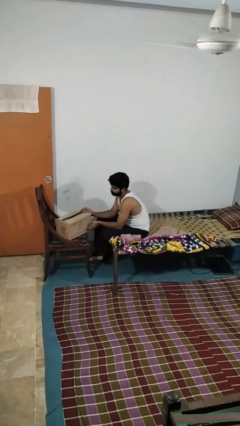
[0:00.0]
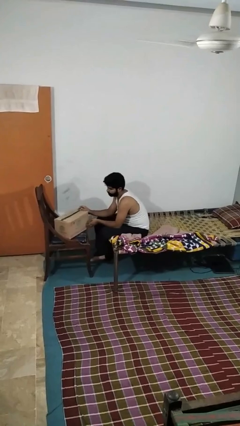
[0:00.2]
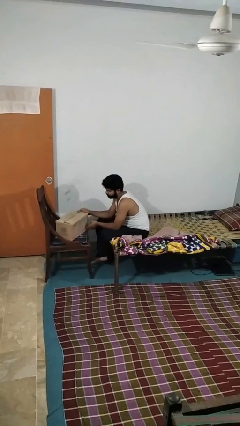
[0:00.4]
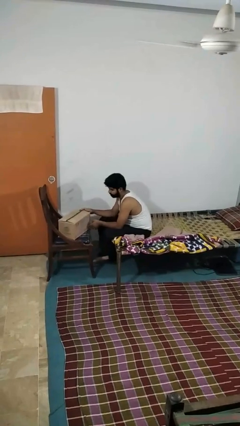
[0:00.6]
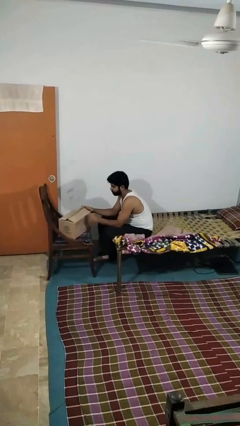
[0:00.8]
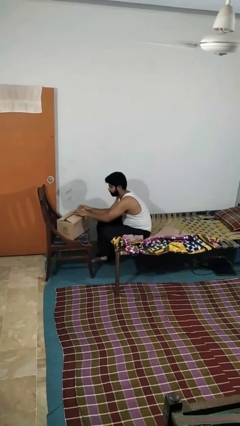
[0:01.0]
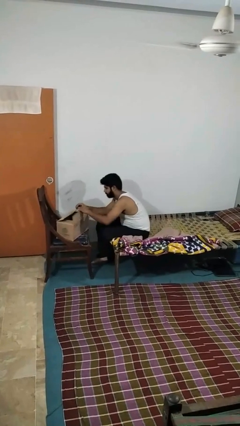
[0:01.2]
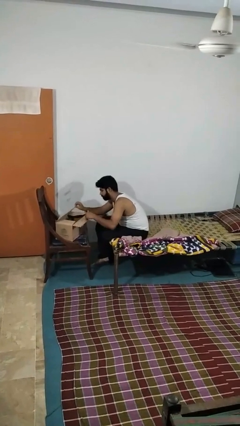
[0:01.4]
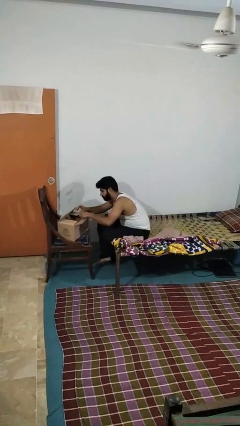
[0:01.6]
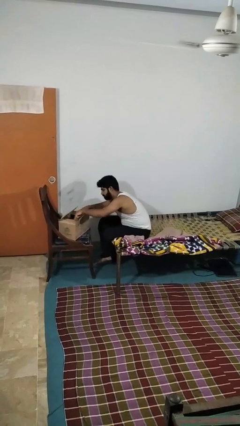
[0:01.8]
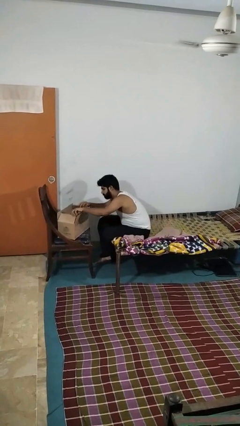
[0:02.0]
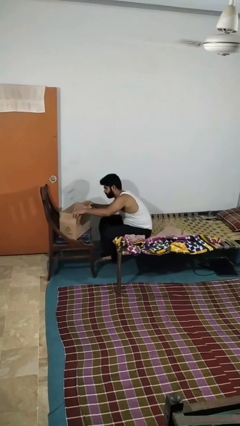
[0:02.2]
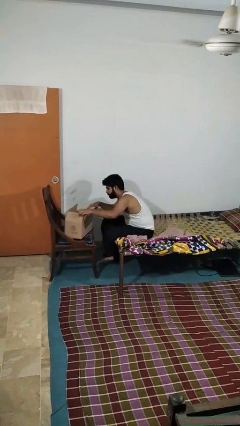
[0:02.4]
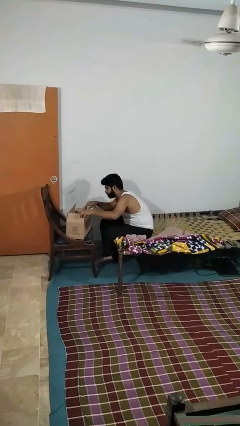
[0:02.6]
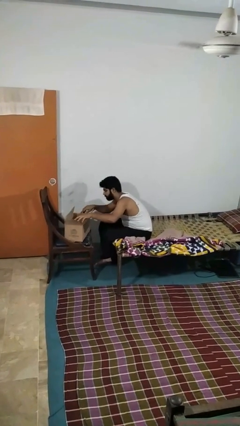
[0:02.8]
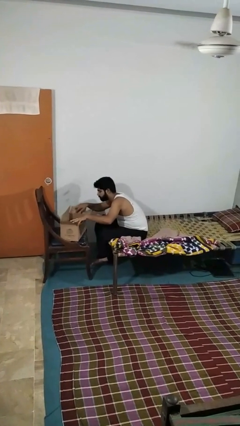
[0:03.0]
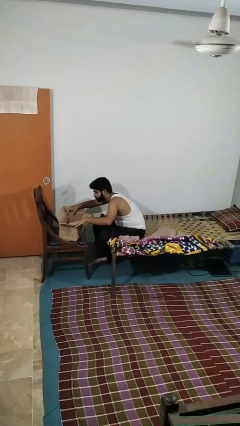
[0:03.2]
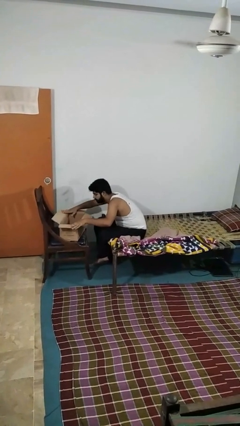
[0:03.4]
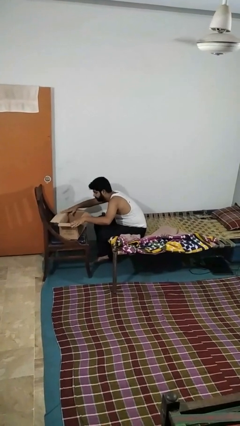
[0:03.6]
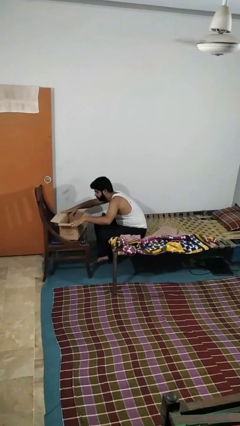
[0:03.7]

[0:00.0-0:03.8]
person opens box

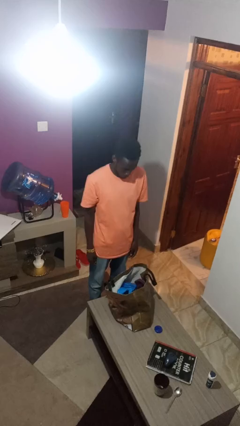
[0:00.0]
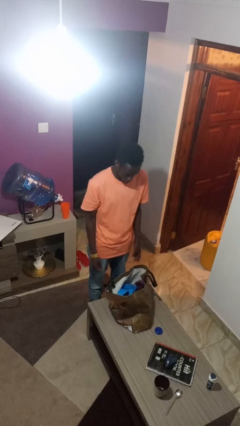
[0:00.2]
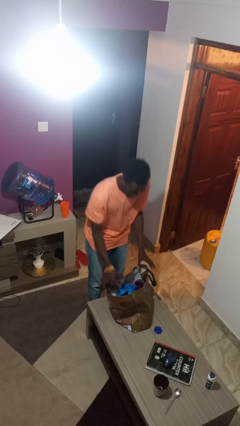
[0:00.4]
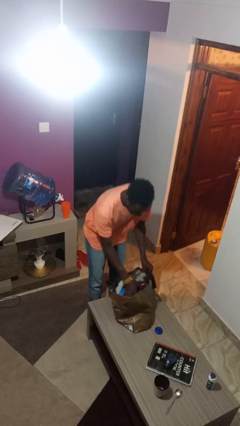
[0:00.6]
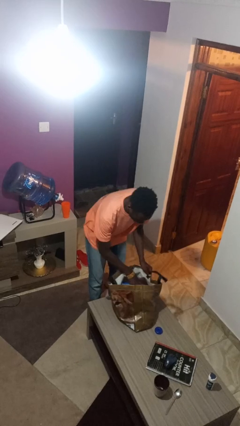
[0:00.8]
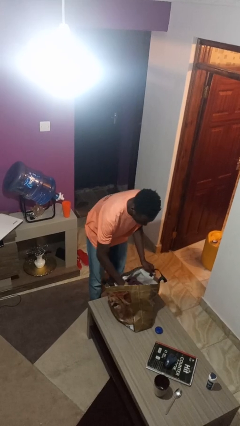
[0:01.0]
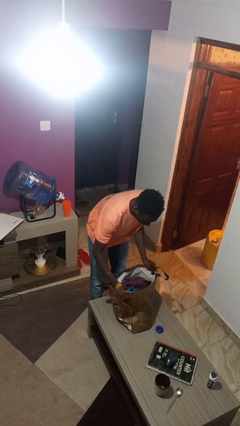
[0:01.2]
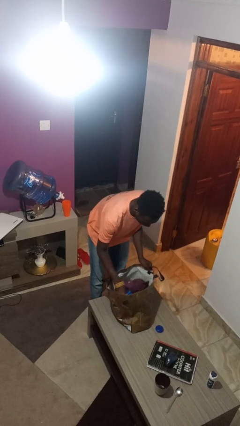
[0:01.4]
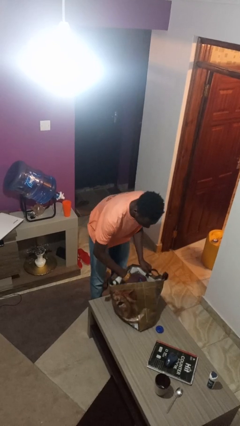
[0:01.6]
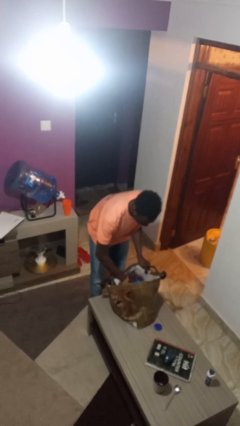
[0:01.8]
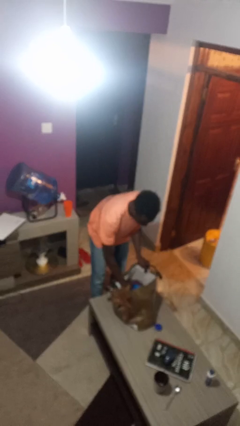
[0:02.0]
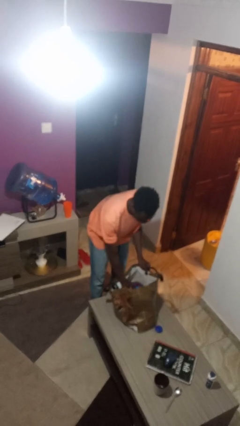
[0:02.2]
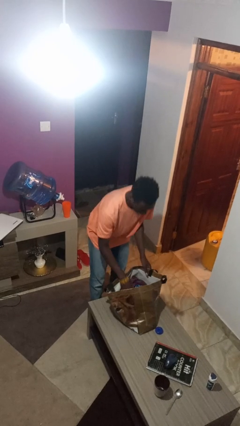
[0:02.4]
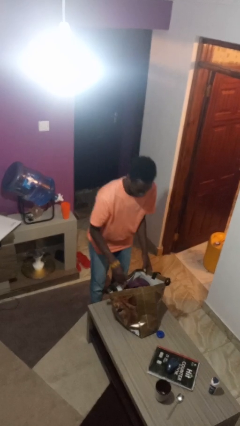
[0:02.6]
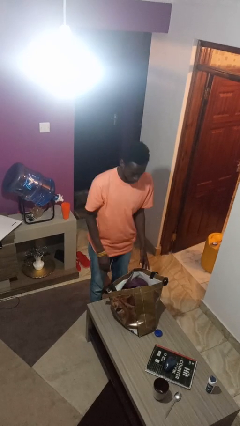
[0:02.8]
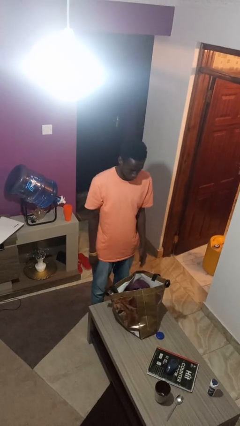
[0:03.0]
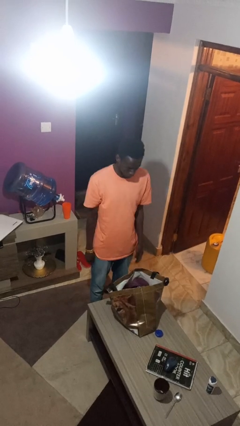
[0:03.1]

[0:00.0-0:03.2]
person searches in bag

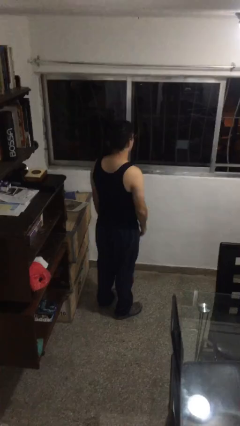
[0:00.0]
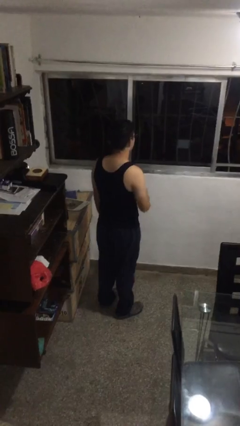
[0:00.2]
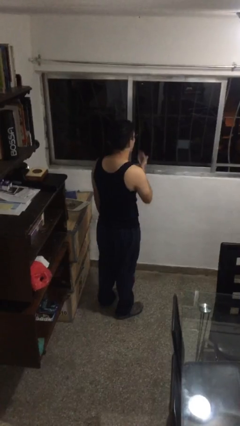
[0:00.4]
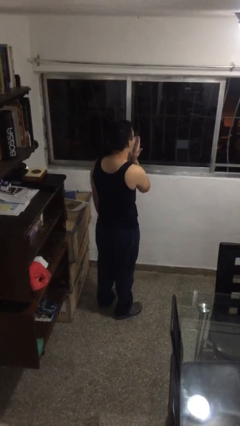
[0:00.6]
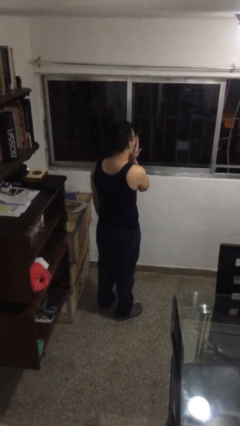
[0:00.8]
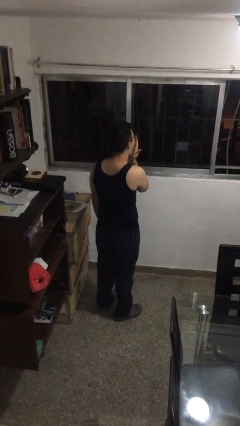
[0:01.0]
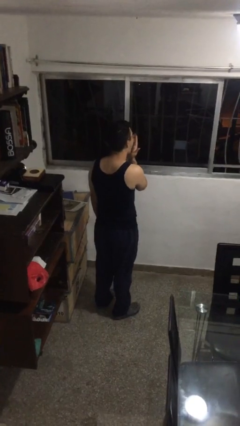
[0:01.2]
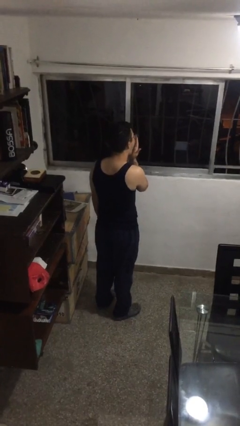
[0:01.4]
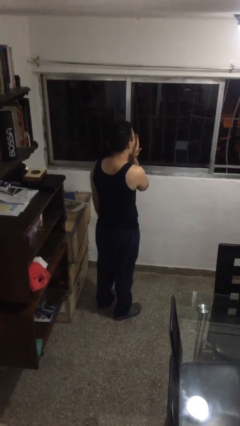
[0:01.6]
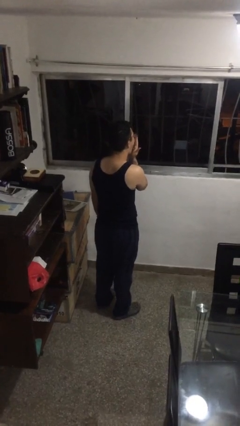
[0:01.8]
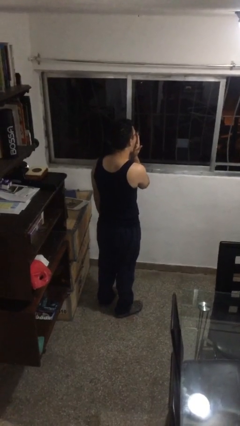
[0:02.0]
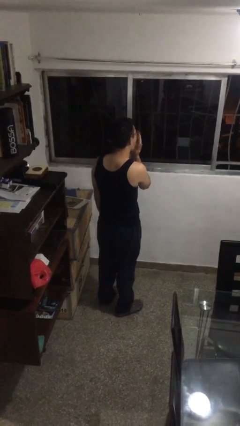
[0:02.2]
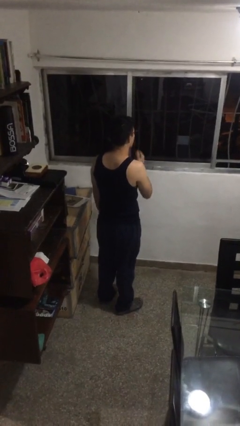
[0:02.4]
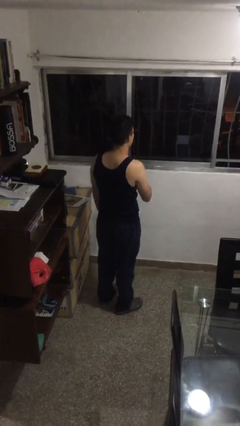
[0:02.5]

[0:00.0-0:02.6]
person yawns

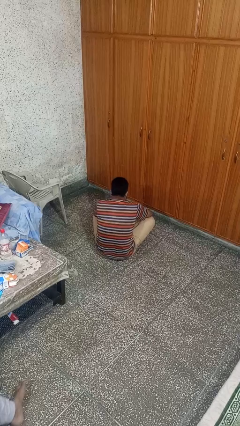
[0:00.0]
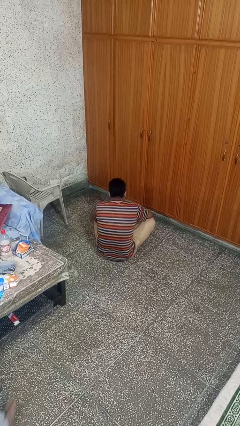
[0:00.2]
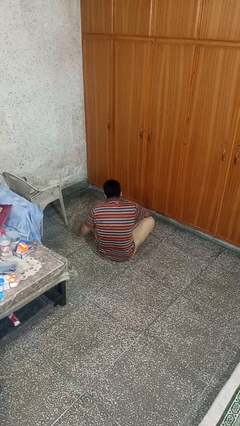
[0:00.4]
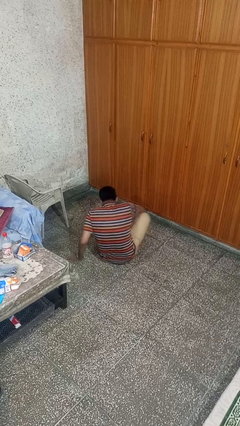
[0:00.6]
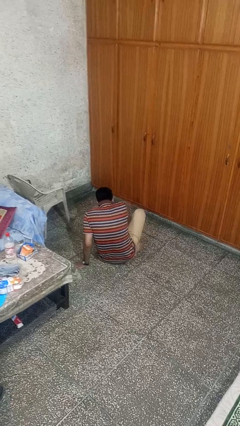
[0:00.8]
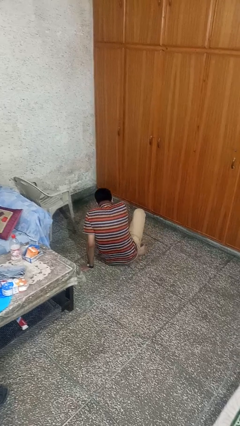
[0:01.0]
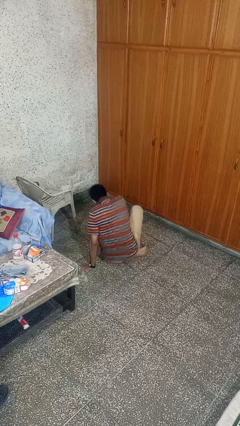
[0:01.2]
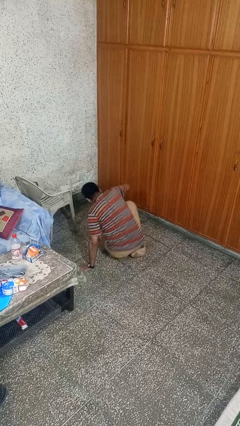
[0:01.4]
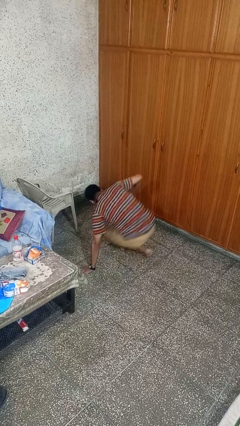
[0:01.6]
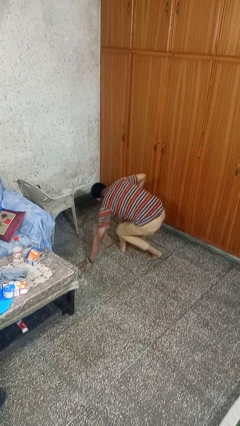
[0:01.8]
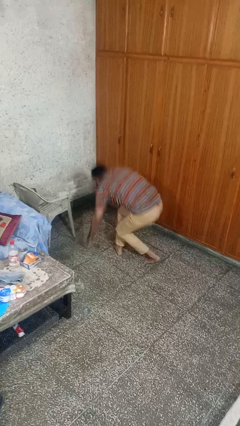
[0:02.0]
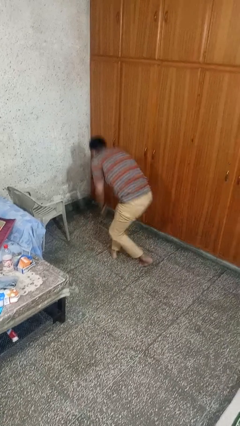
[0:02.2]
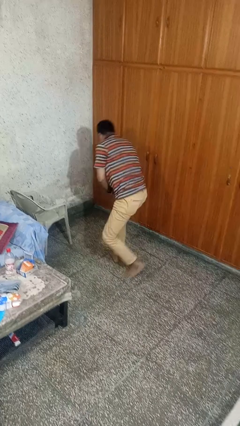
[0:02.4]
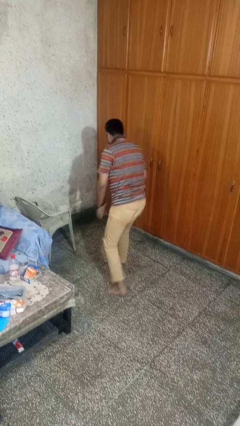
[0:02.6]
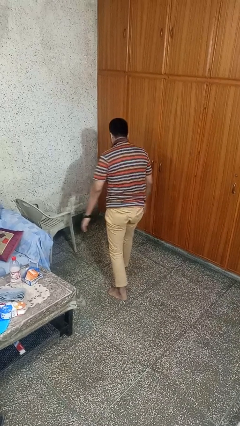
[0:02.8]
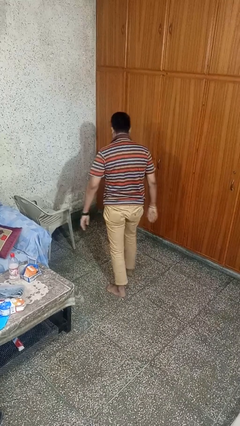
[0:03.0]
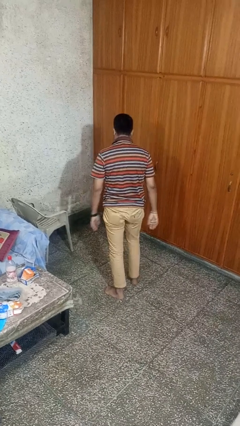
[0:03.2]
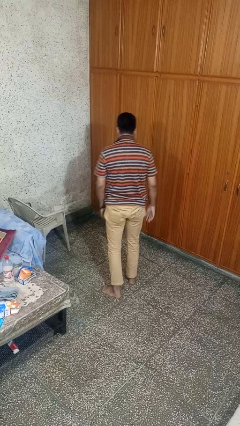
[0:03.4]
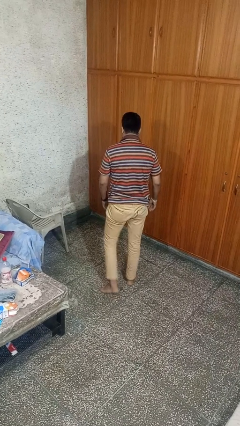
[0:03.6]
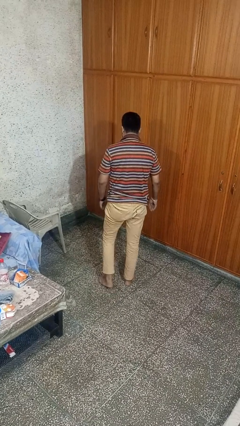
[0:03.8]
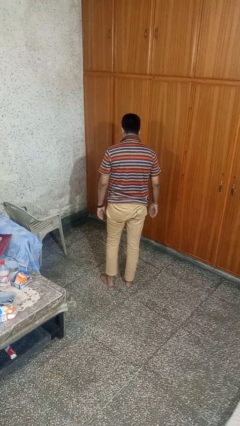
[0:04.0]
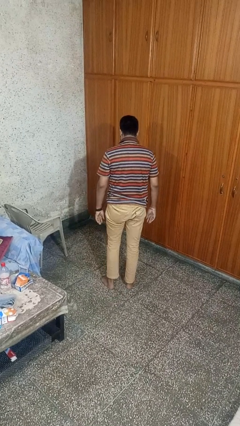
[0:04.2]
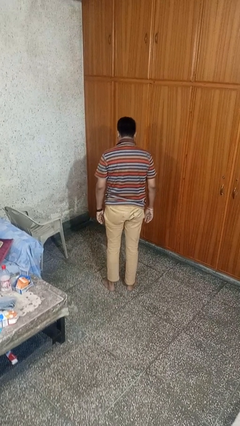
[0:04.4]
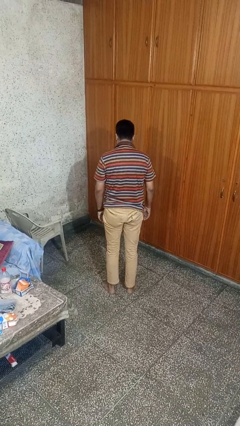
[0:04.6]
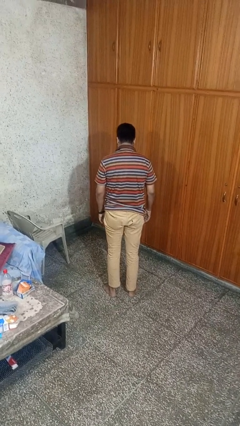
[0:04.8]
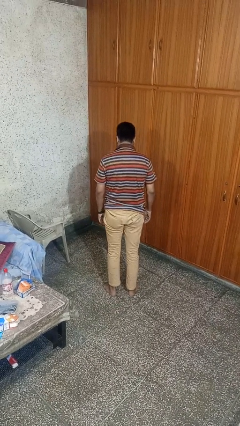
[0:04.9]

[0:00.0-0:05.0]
person stands up from floor

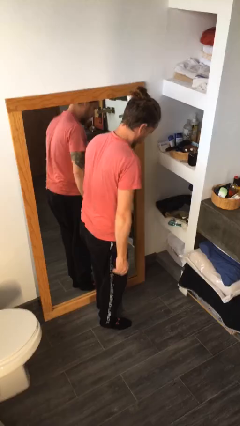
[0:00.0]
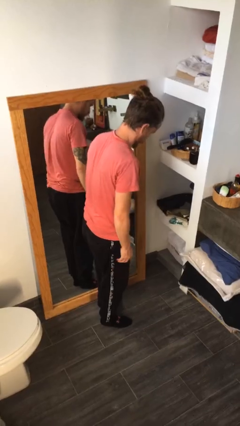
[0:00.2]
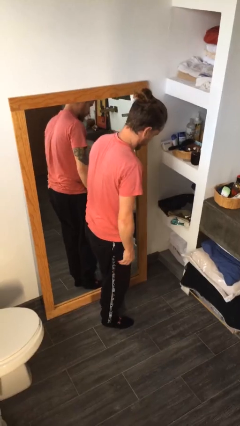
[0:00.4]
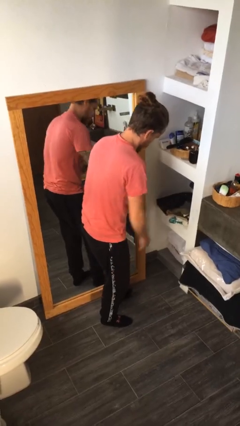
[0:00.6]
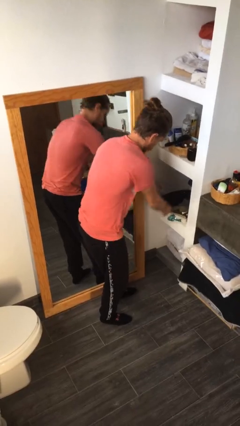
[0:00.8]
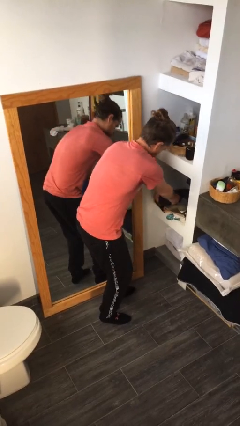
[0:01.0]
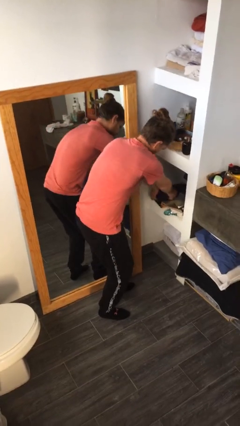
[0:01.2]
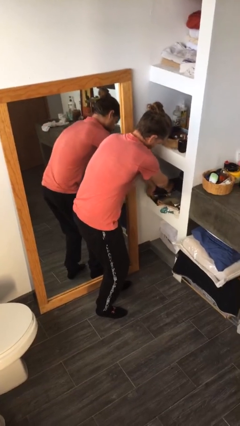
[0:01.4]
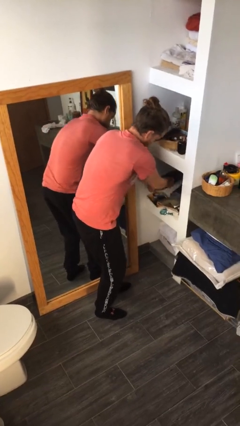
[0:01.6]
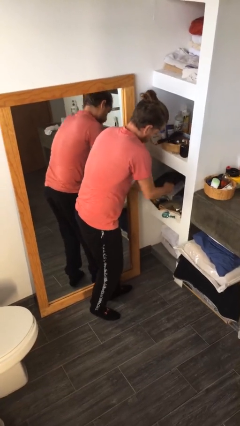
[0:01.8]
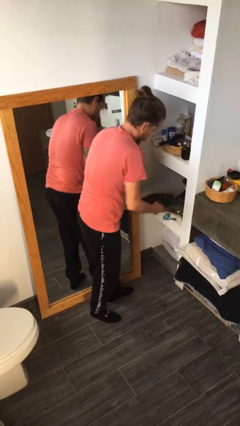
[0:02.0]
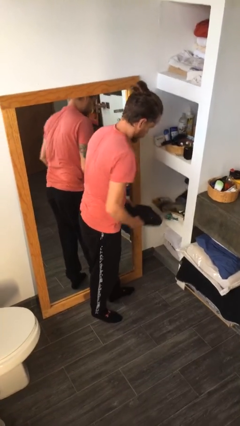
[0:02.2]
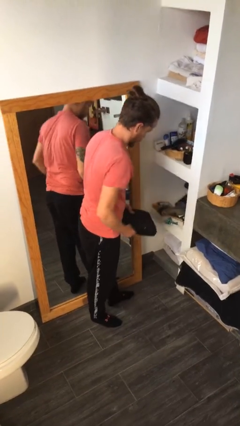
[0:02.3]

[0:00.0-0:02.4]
person picks up object from cabinet
